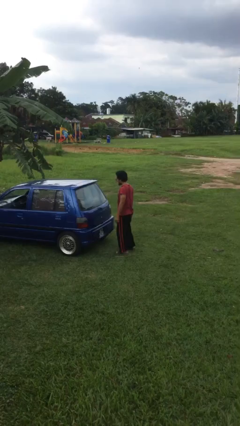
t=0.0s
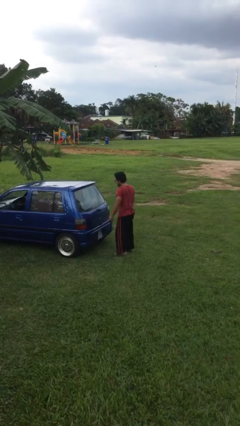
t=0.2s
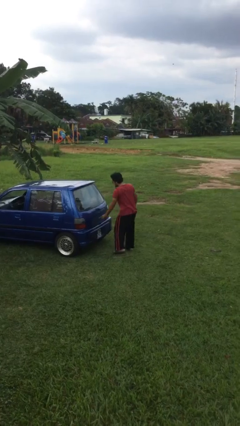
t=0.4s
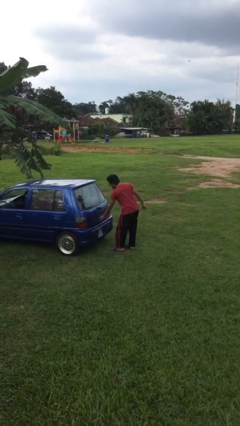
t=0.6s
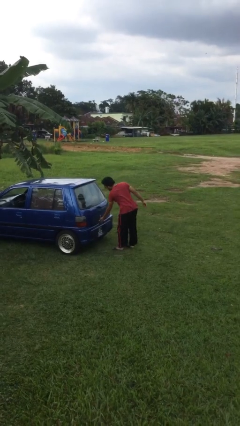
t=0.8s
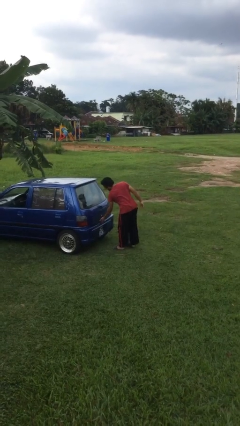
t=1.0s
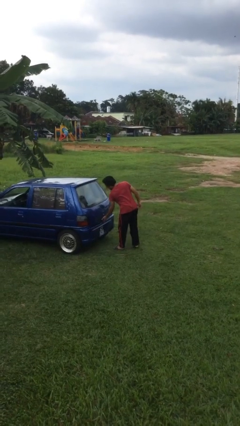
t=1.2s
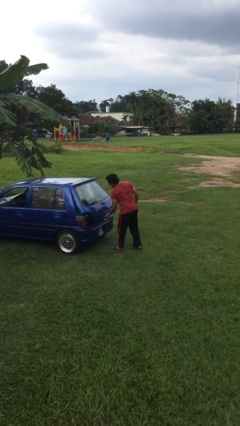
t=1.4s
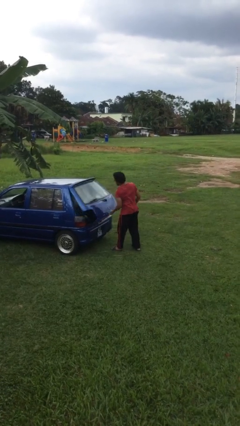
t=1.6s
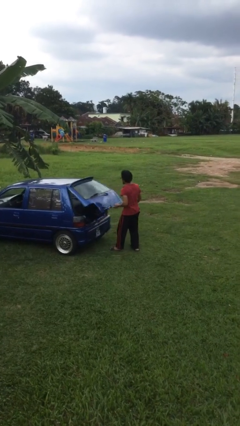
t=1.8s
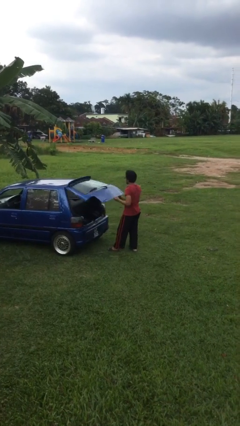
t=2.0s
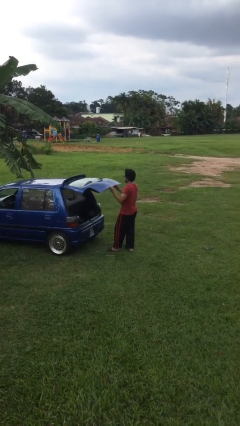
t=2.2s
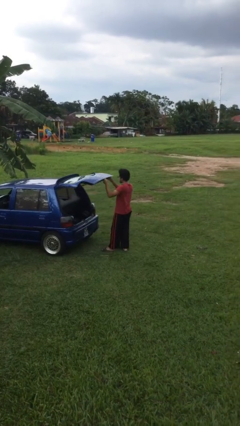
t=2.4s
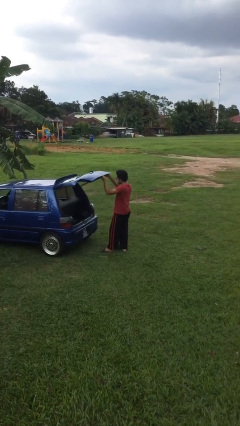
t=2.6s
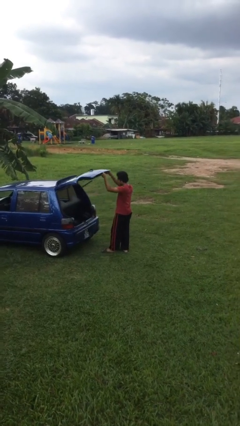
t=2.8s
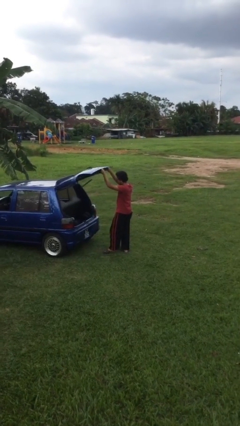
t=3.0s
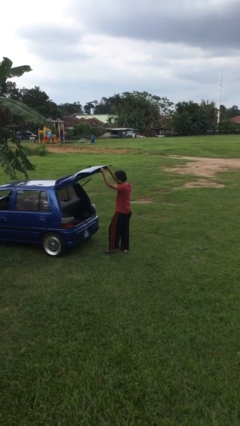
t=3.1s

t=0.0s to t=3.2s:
person opens car trunk

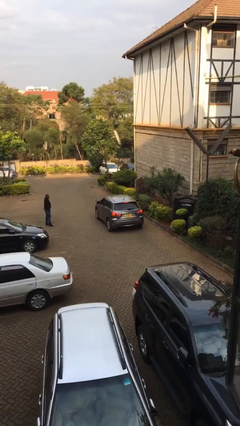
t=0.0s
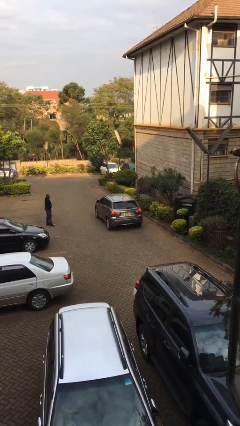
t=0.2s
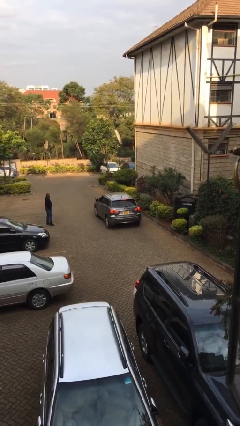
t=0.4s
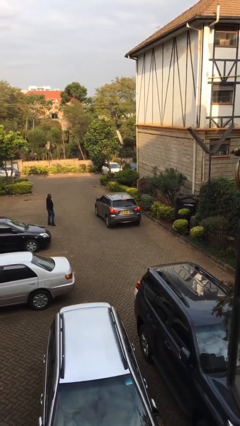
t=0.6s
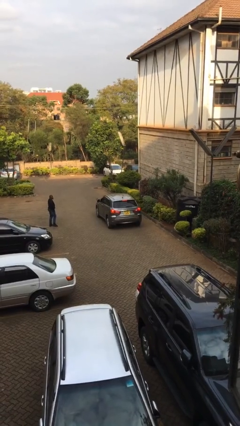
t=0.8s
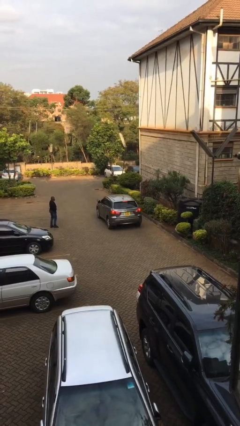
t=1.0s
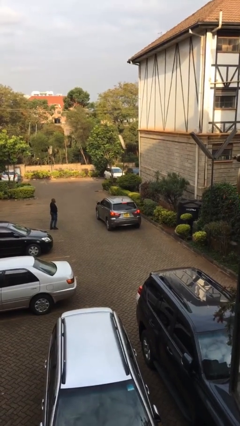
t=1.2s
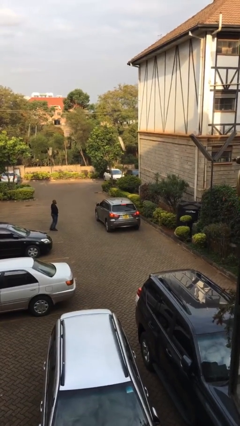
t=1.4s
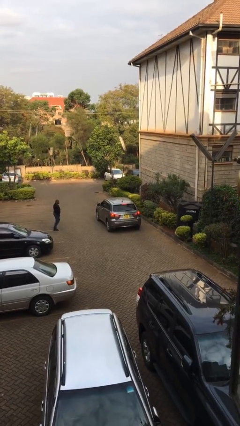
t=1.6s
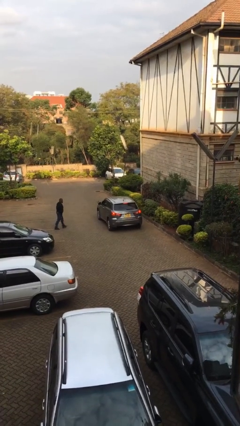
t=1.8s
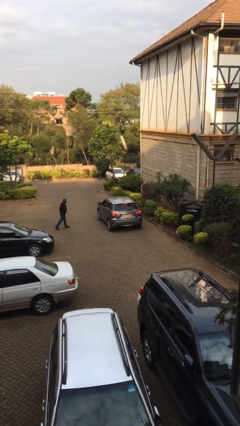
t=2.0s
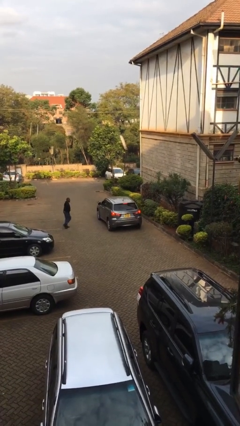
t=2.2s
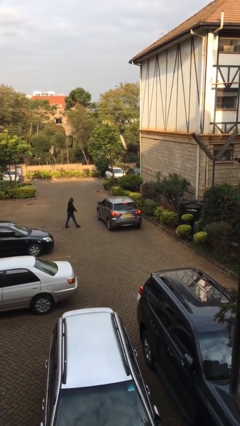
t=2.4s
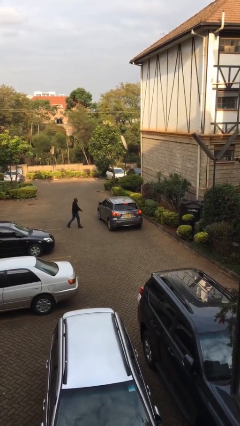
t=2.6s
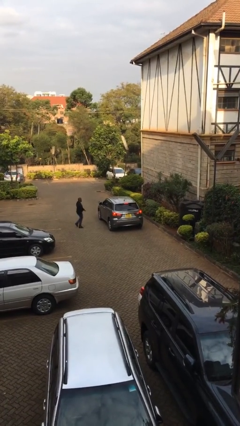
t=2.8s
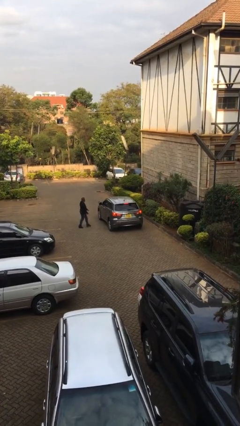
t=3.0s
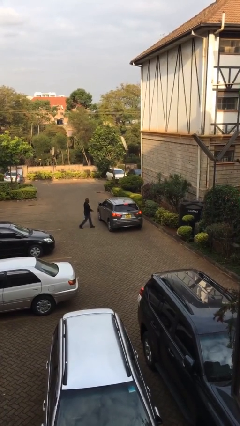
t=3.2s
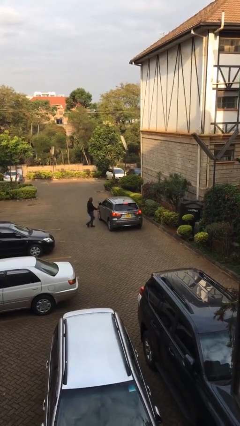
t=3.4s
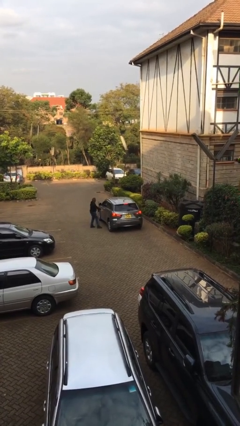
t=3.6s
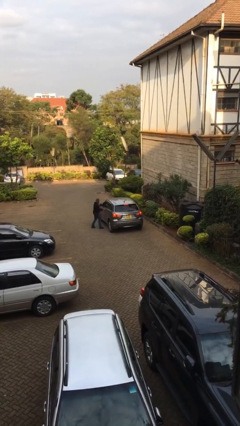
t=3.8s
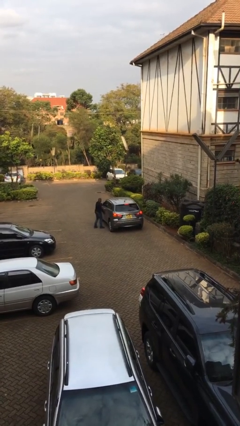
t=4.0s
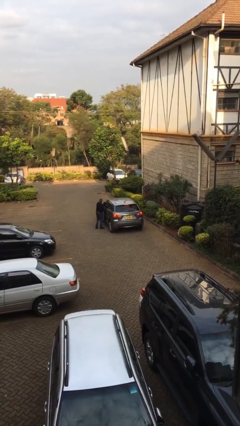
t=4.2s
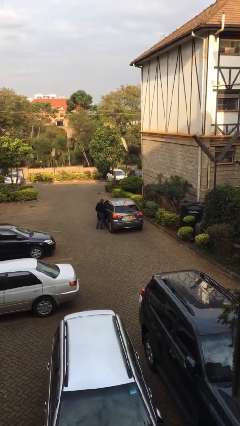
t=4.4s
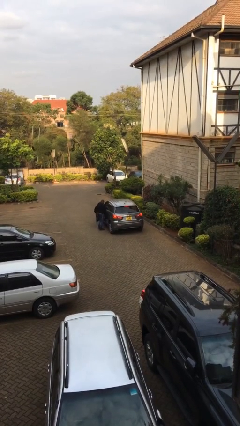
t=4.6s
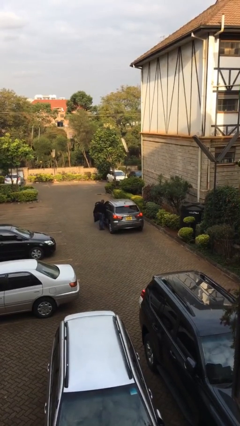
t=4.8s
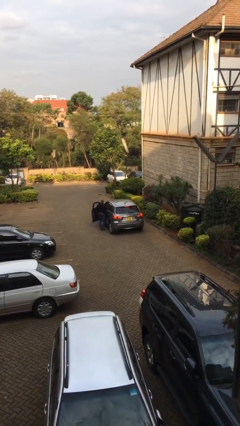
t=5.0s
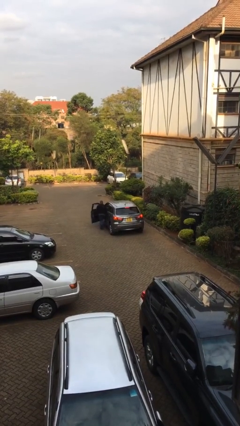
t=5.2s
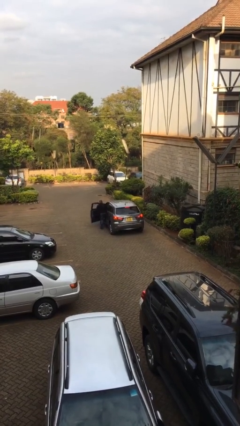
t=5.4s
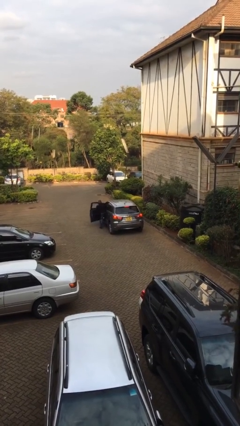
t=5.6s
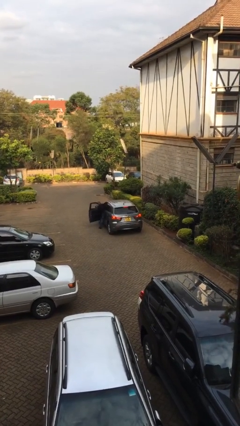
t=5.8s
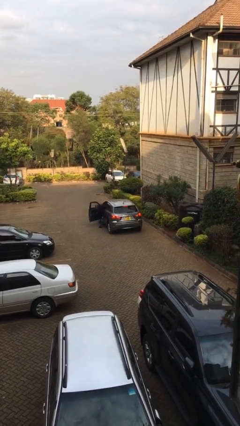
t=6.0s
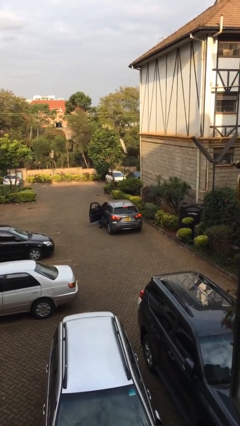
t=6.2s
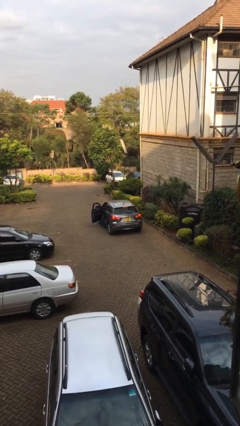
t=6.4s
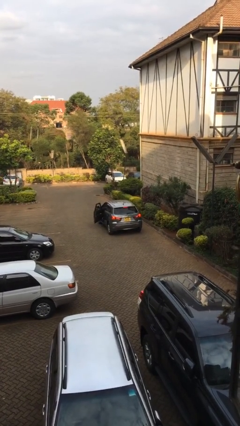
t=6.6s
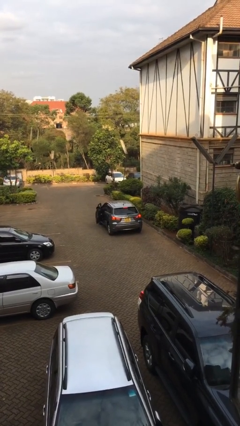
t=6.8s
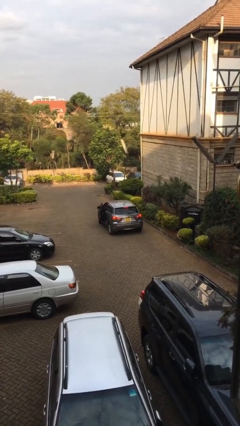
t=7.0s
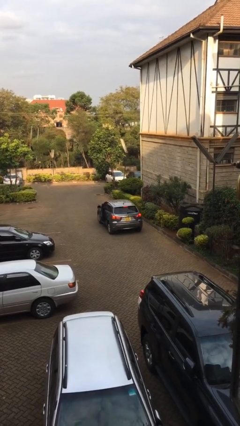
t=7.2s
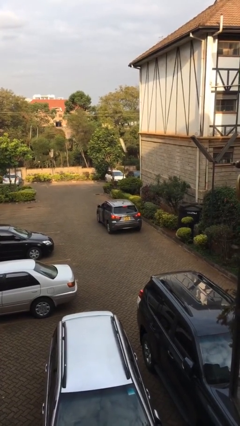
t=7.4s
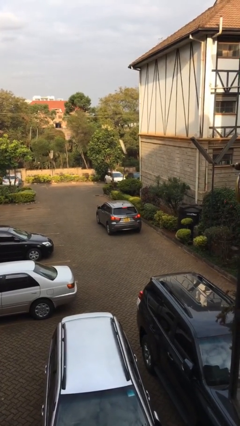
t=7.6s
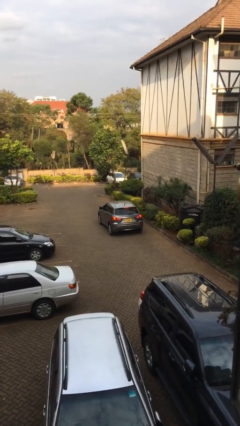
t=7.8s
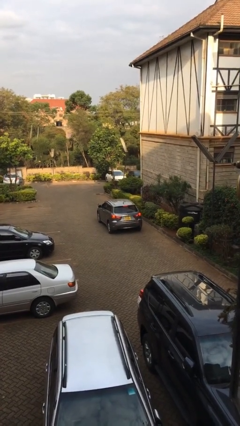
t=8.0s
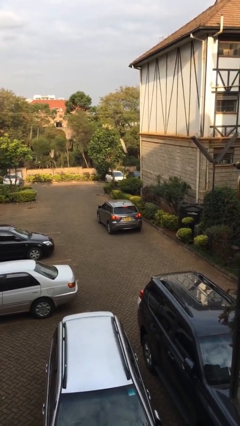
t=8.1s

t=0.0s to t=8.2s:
car picks up person

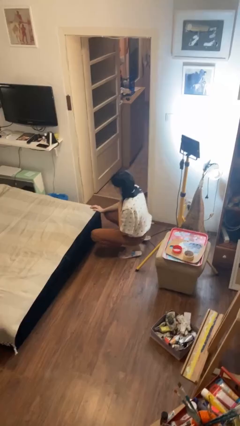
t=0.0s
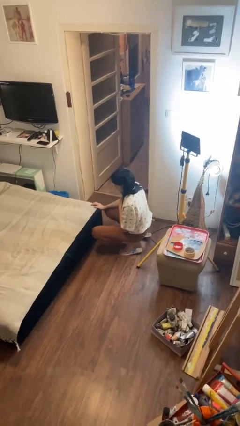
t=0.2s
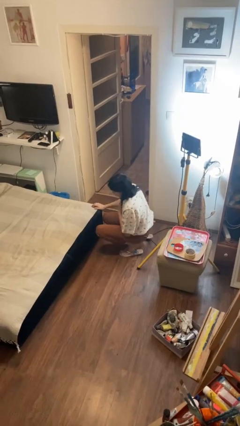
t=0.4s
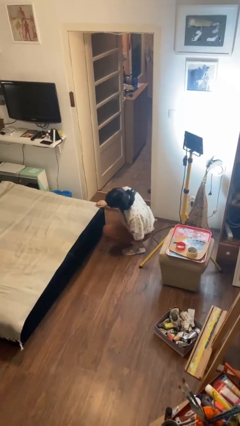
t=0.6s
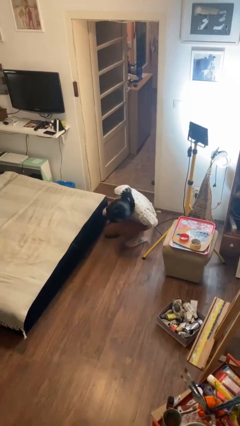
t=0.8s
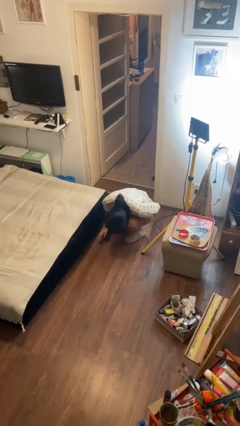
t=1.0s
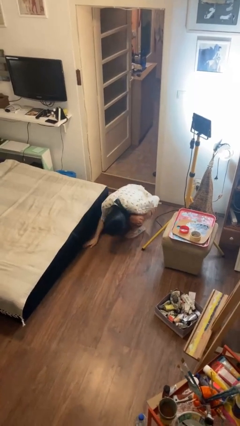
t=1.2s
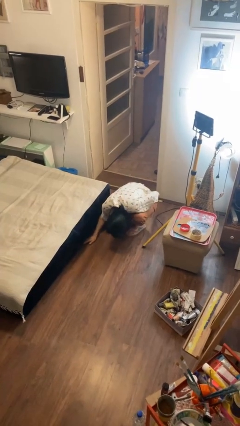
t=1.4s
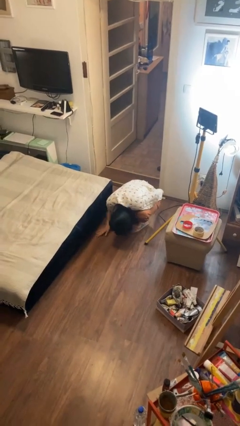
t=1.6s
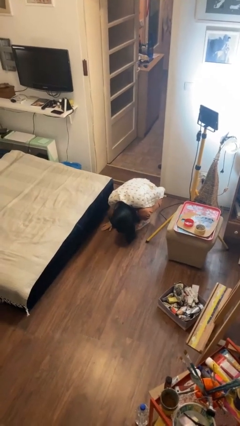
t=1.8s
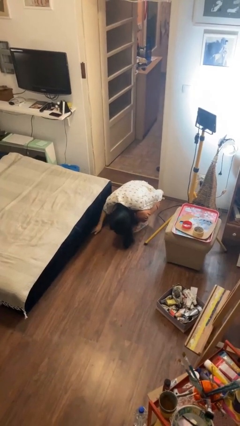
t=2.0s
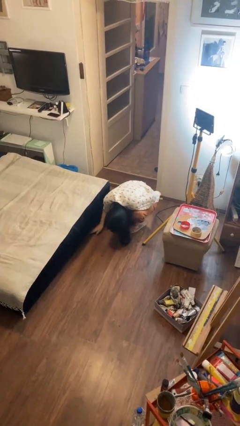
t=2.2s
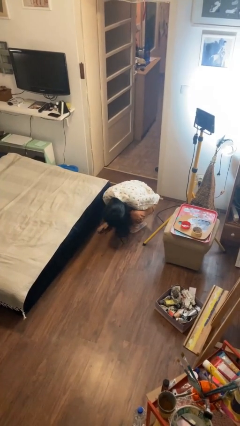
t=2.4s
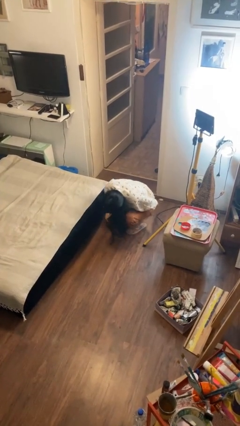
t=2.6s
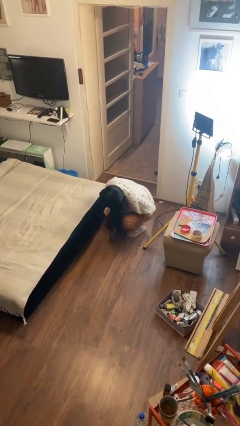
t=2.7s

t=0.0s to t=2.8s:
person searches under bed

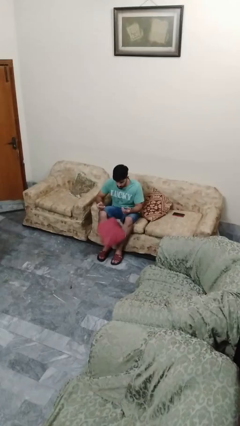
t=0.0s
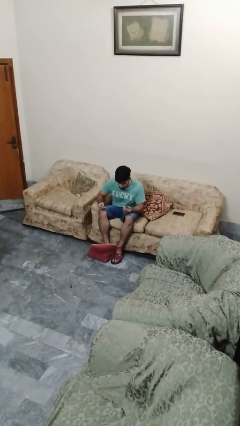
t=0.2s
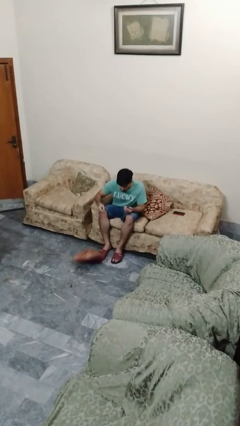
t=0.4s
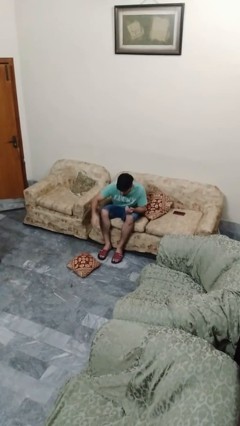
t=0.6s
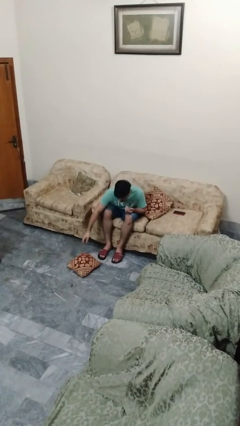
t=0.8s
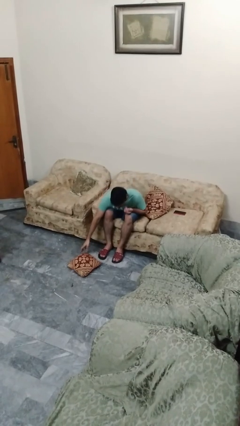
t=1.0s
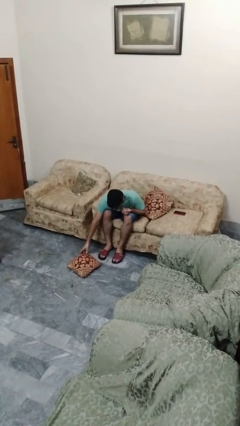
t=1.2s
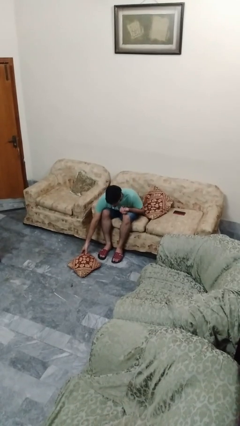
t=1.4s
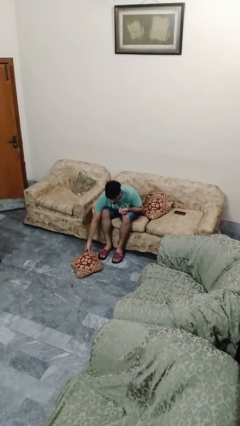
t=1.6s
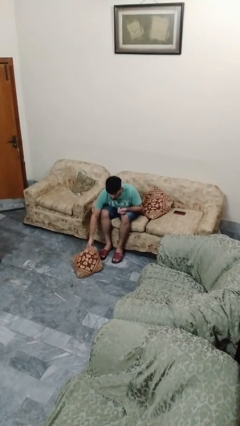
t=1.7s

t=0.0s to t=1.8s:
person drops object

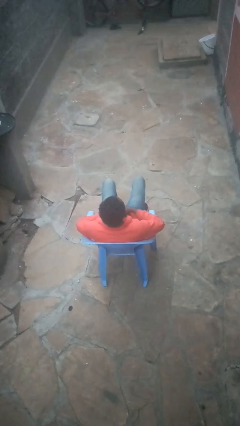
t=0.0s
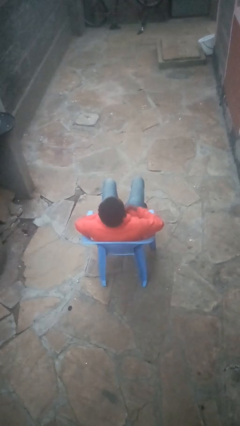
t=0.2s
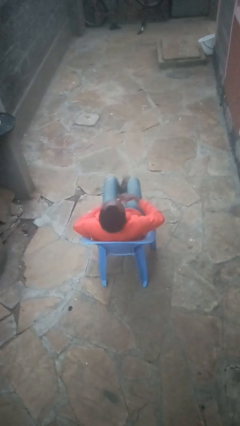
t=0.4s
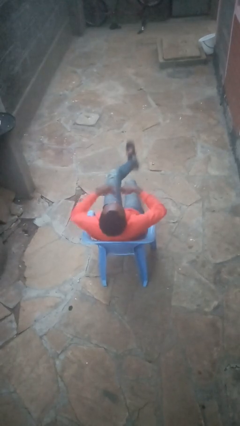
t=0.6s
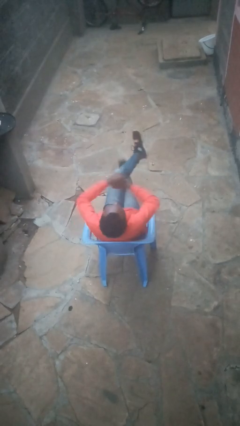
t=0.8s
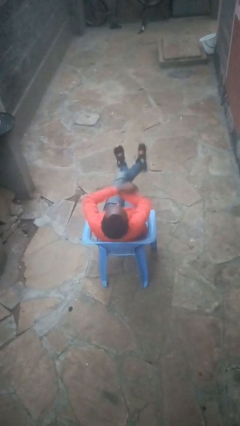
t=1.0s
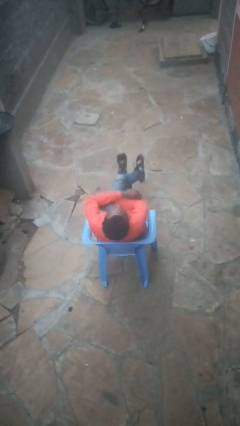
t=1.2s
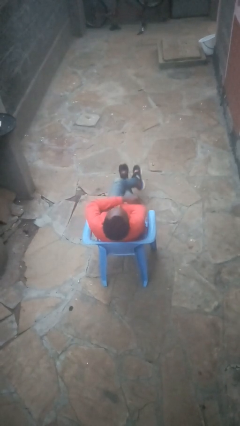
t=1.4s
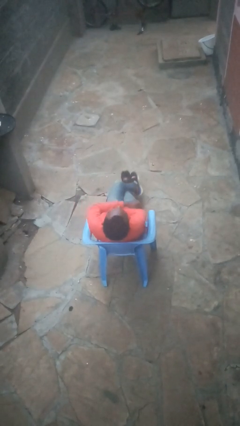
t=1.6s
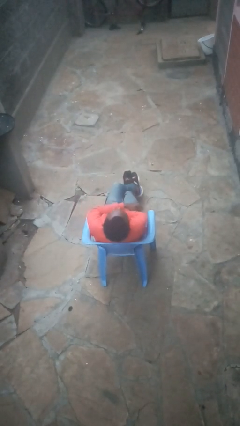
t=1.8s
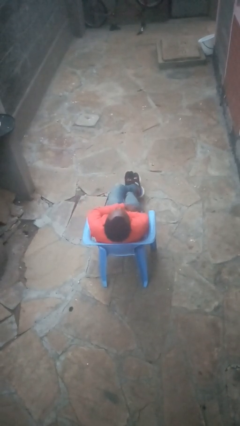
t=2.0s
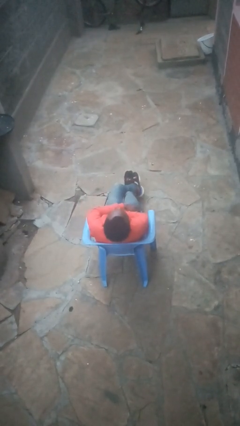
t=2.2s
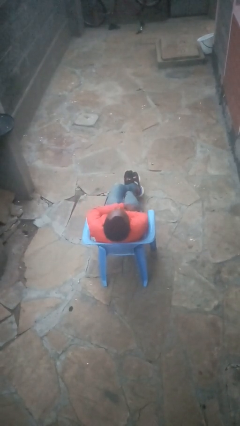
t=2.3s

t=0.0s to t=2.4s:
person crosses legs
